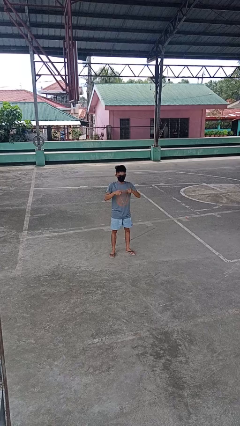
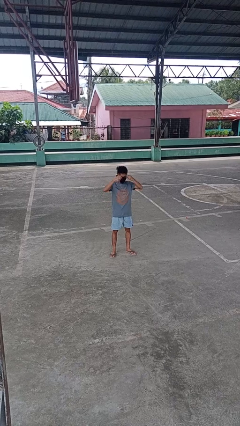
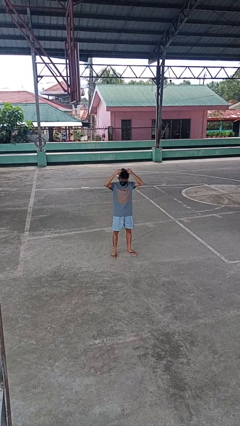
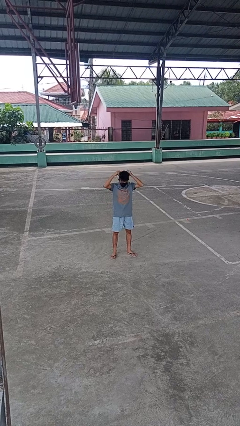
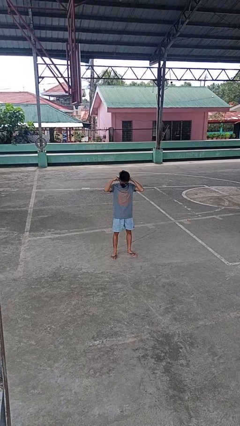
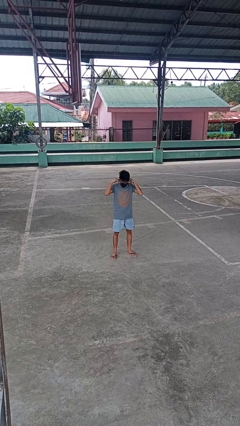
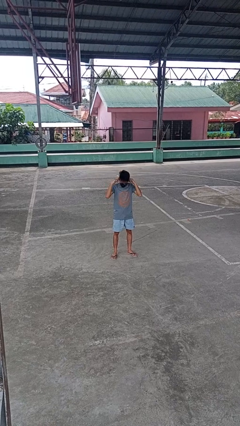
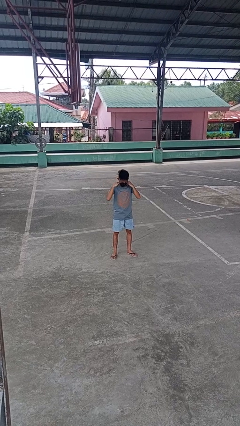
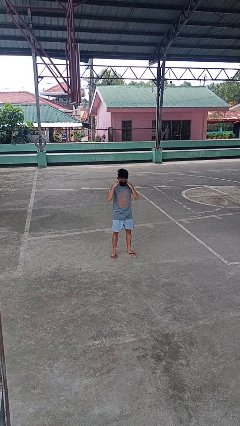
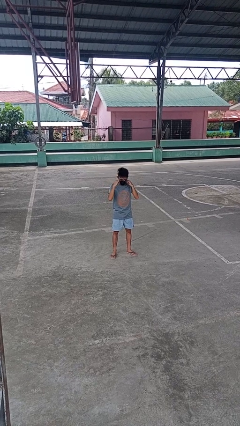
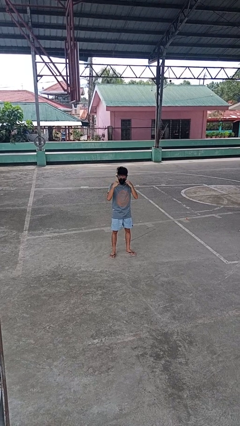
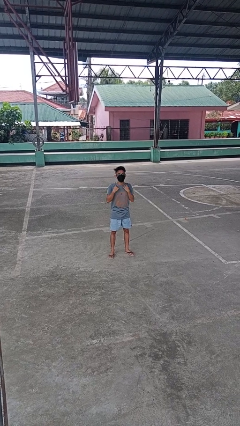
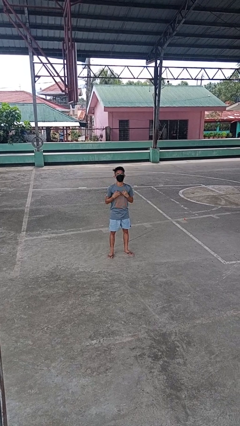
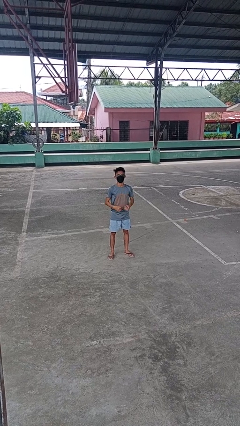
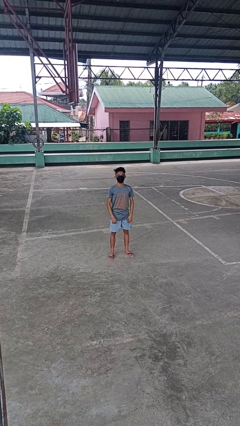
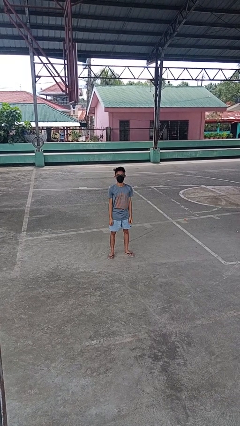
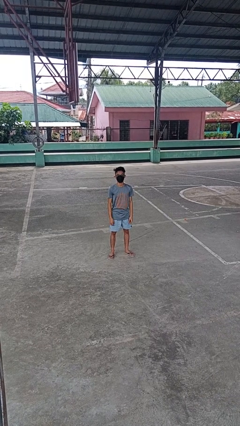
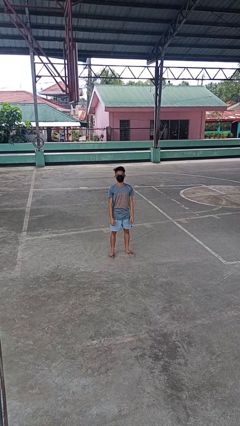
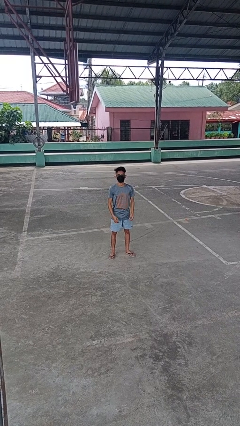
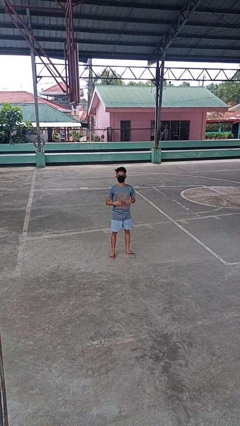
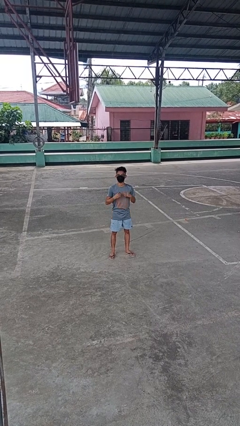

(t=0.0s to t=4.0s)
person puts on necklace

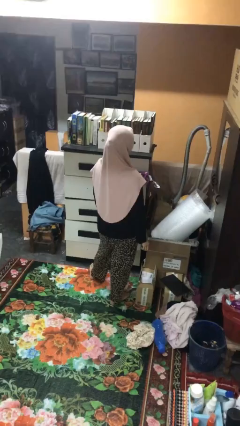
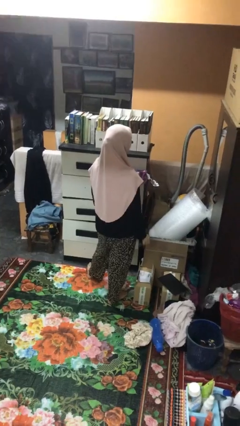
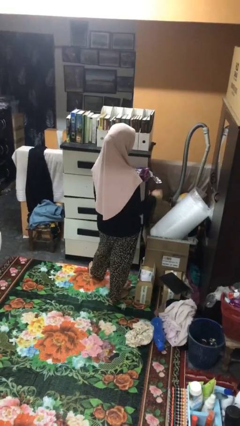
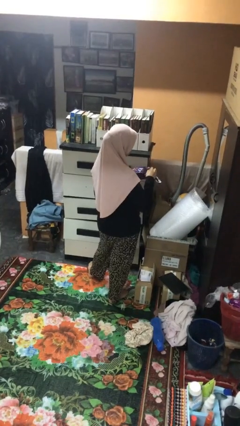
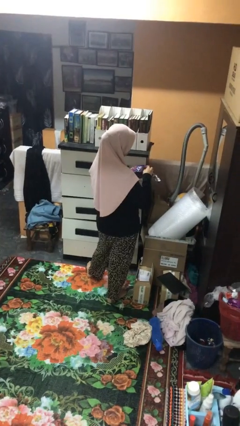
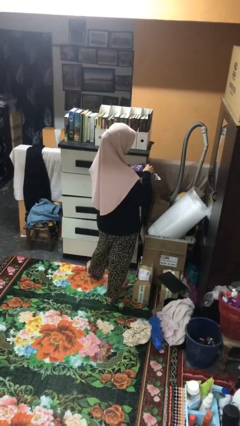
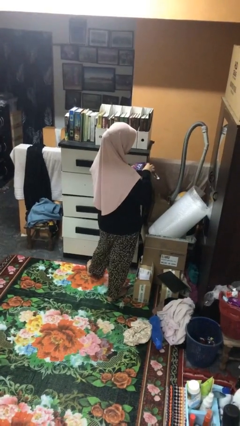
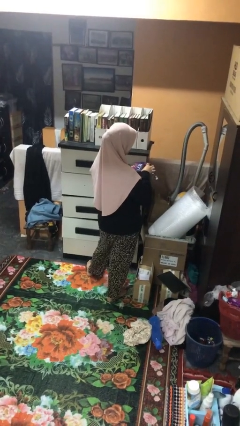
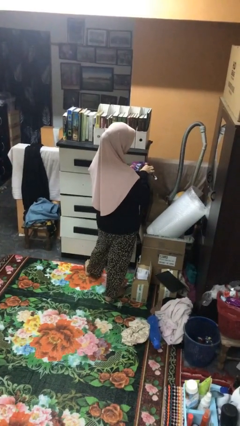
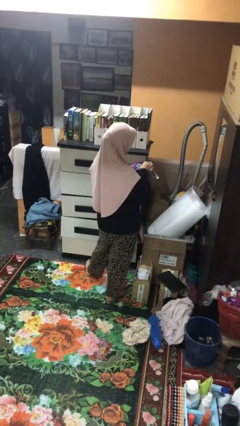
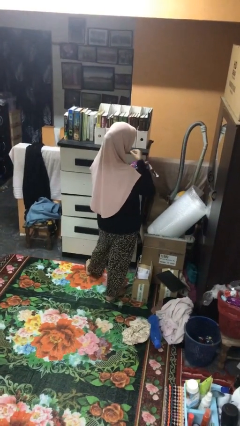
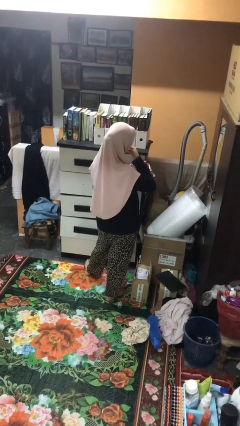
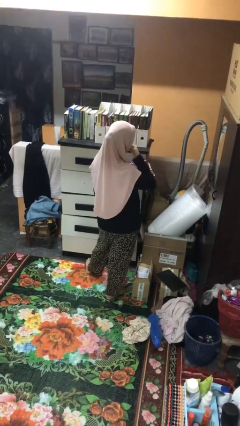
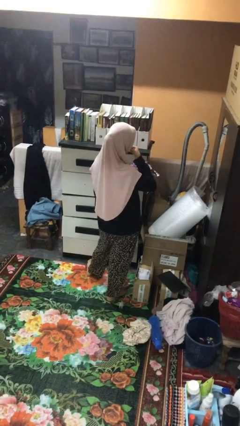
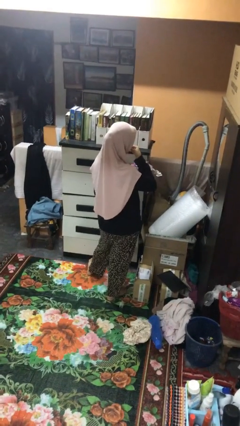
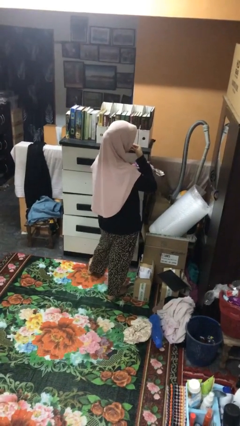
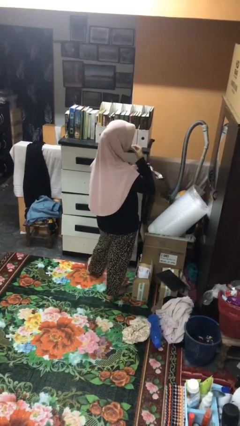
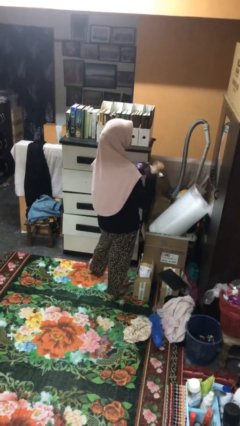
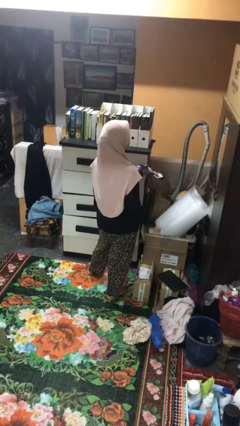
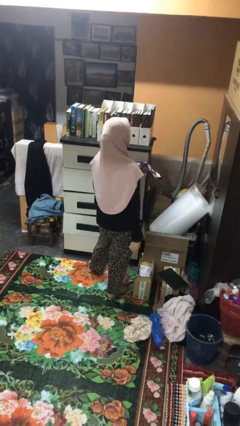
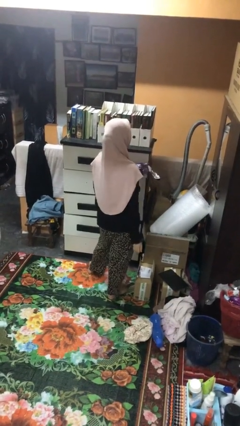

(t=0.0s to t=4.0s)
person eats snack from bag

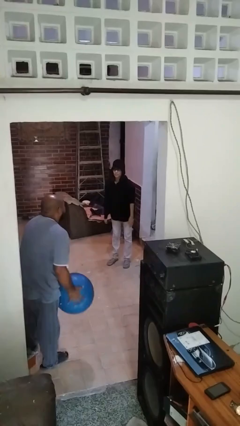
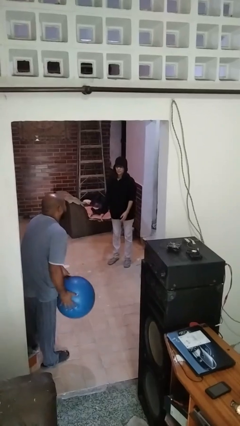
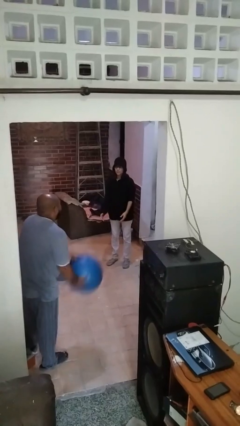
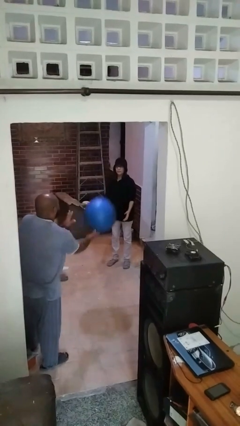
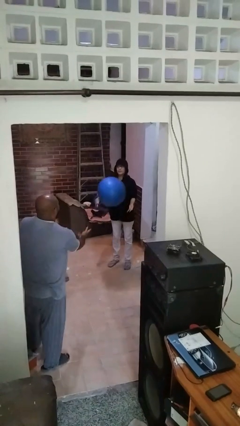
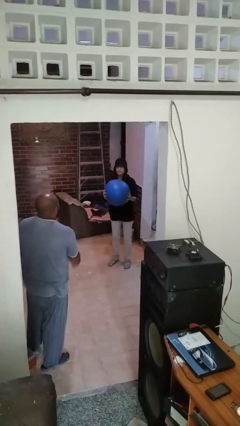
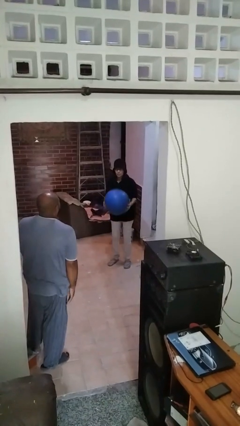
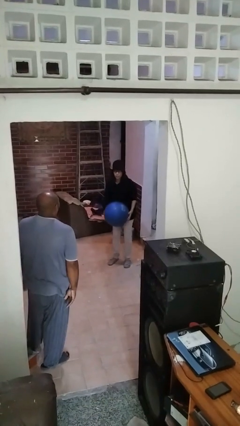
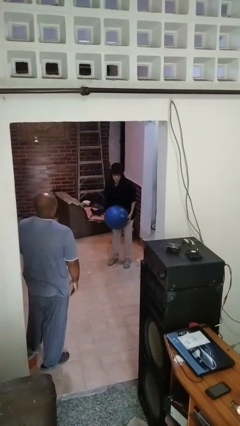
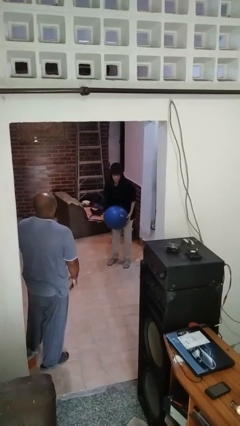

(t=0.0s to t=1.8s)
person catches object from person

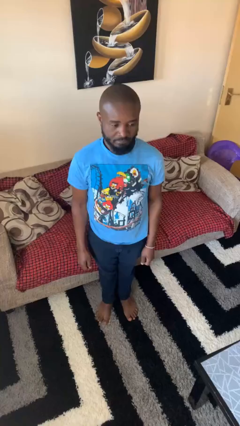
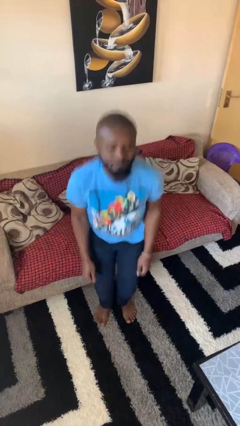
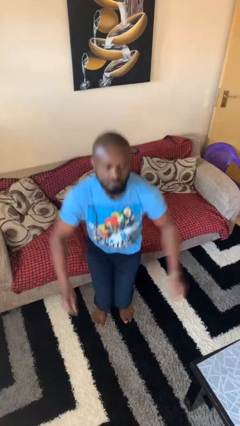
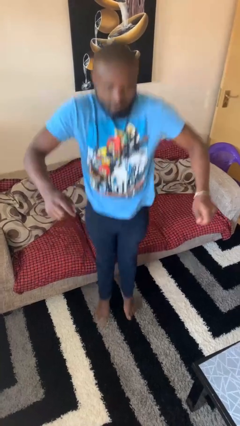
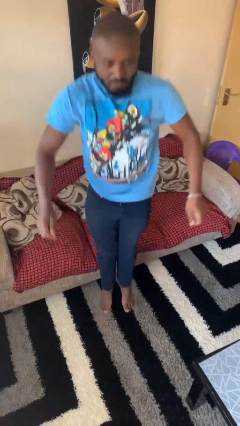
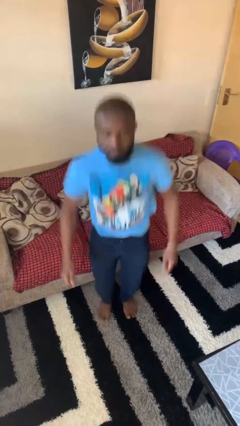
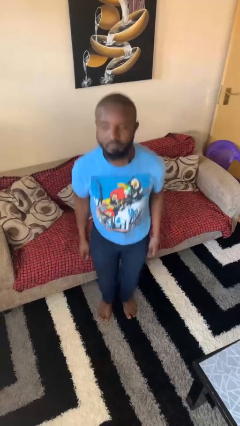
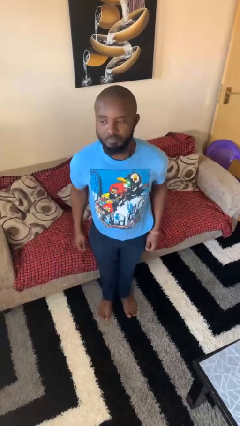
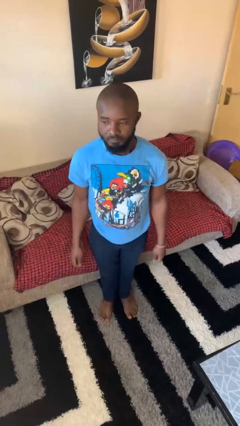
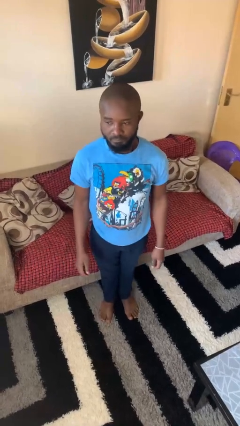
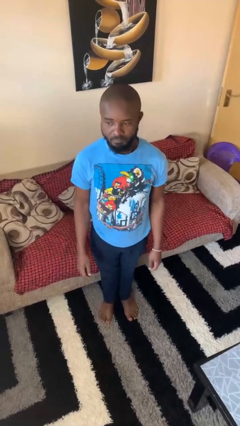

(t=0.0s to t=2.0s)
person jumps

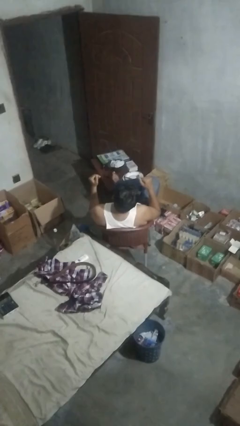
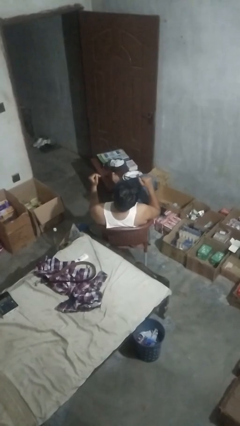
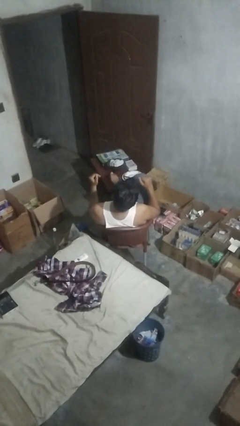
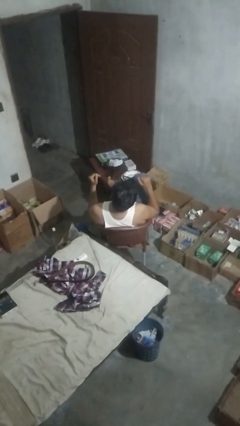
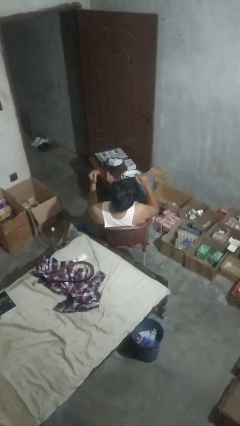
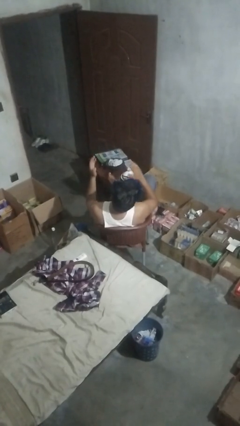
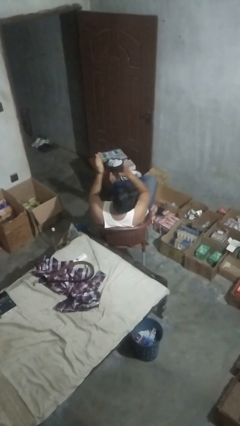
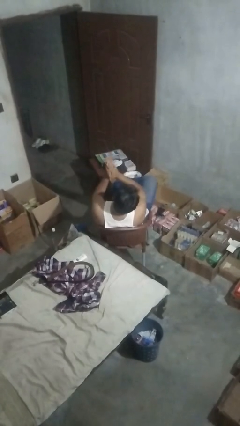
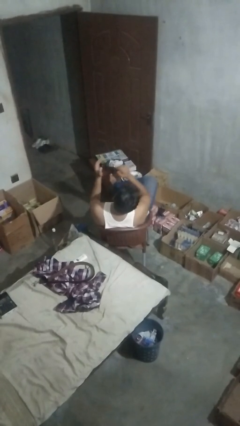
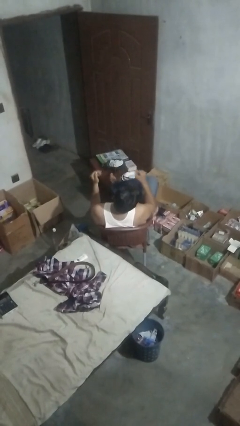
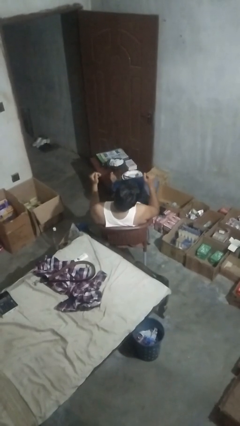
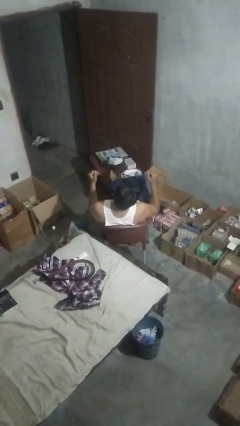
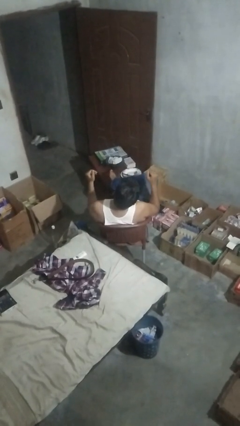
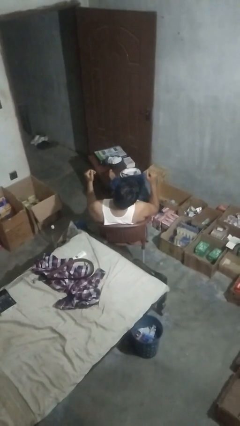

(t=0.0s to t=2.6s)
person claps hands

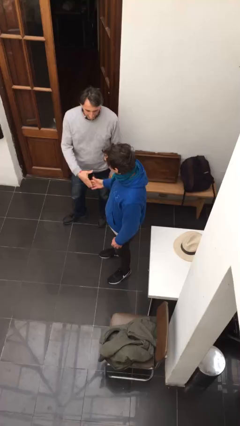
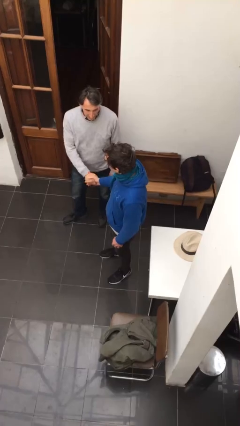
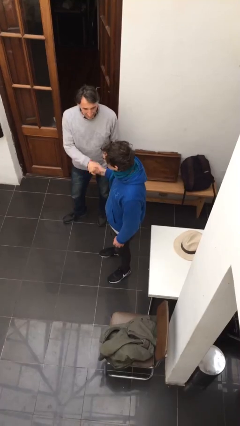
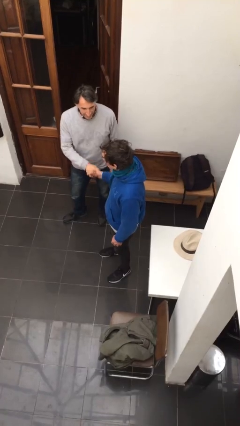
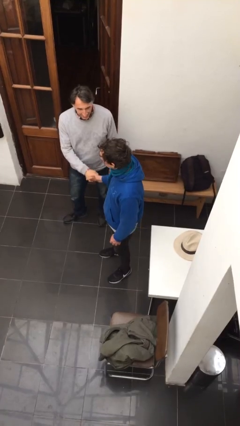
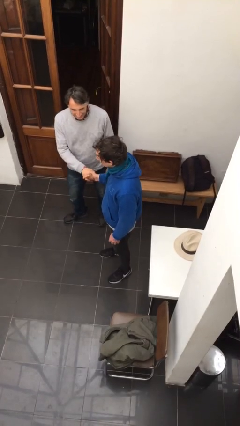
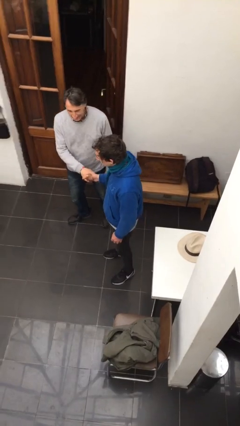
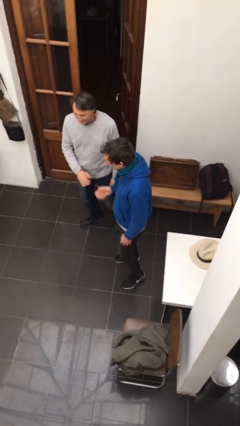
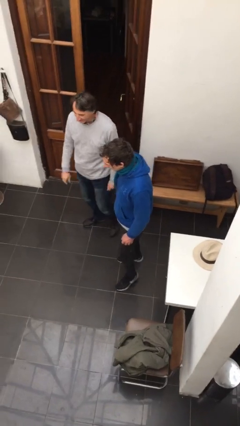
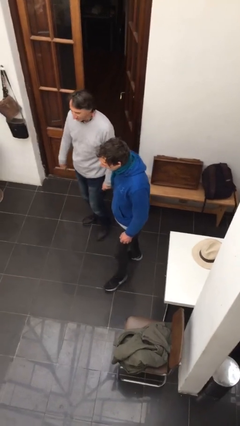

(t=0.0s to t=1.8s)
person shakes hand

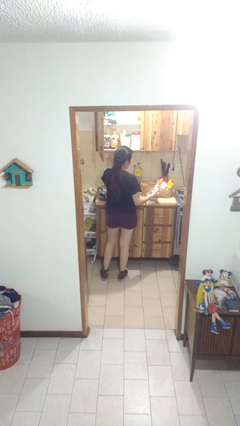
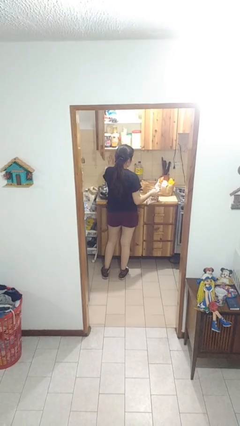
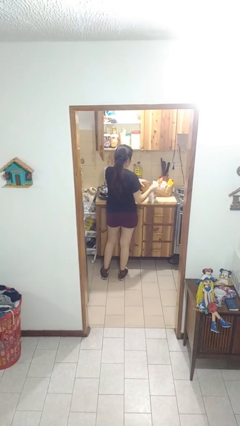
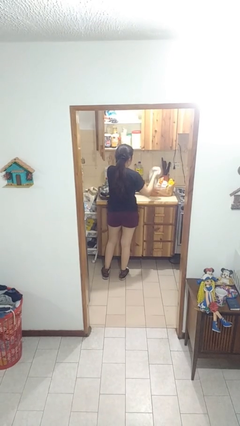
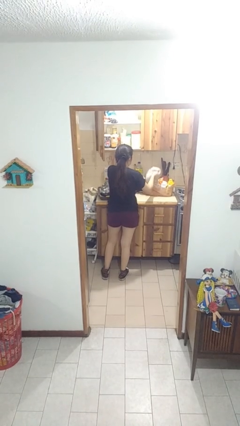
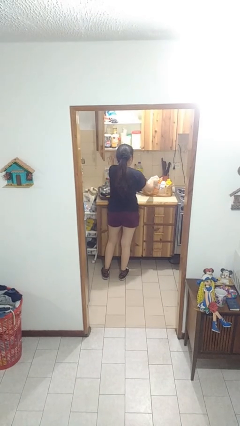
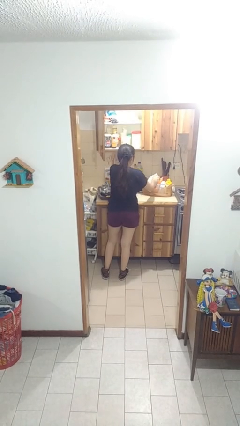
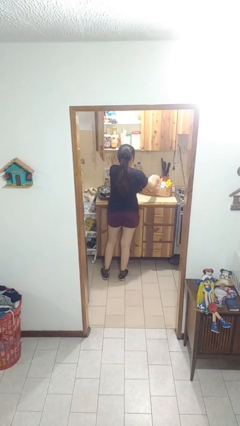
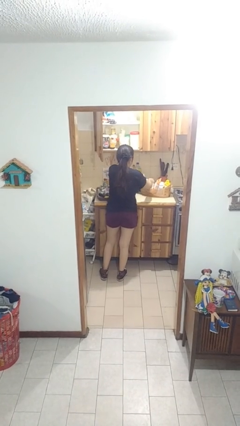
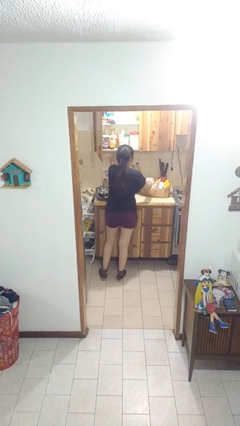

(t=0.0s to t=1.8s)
person puts object into bag
